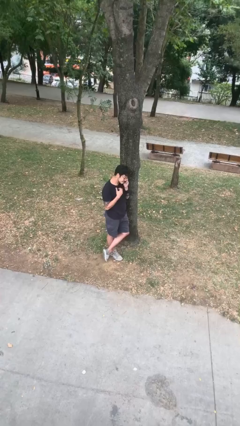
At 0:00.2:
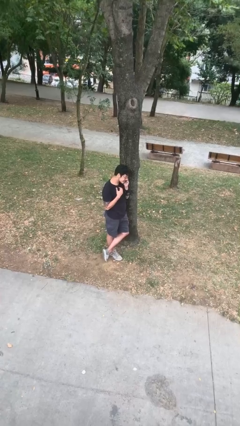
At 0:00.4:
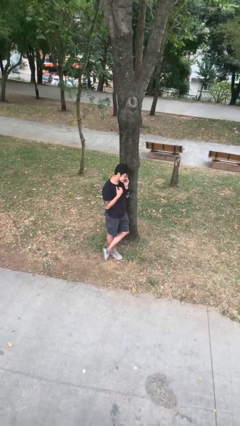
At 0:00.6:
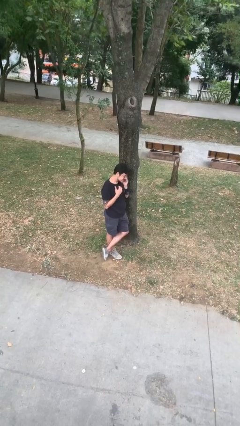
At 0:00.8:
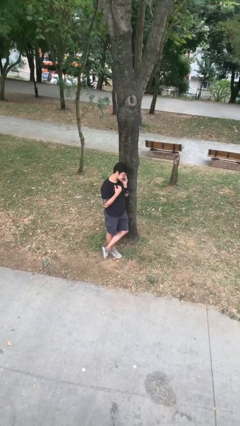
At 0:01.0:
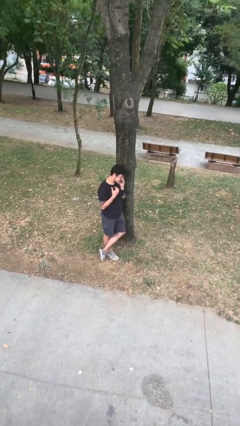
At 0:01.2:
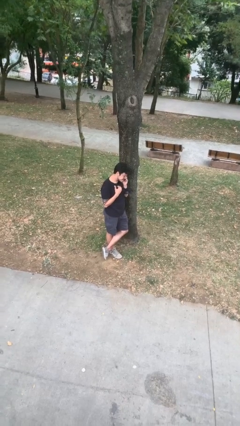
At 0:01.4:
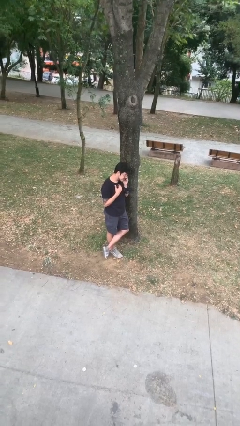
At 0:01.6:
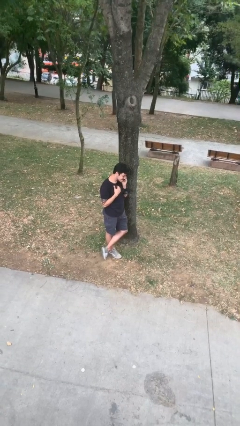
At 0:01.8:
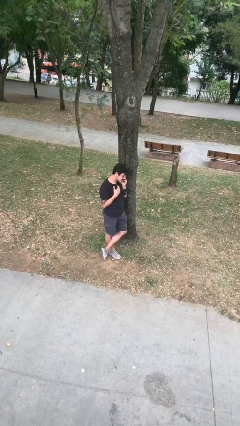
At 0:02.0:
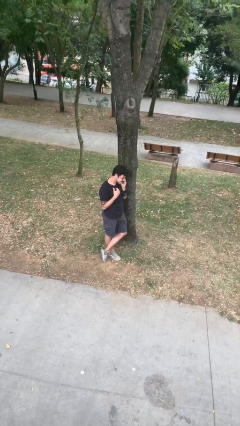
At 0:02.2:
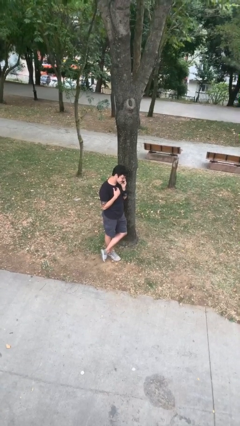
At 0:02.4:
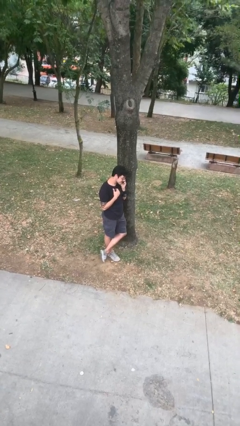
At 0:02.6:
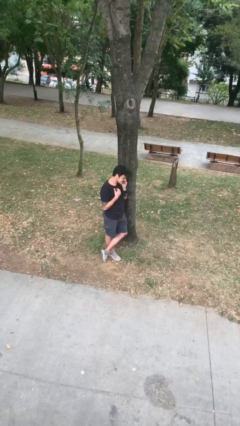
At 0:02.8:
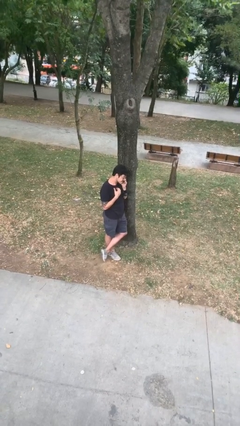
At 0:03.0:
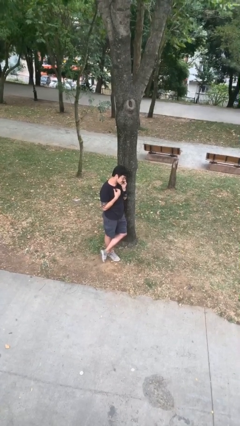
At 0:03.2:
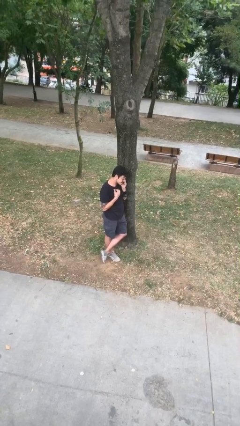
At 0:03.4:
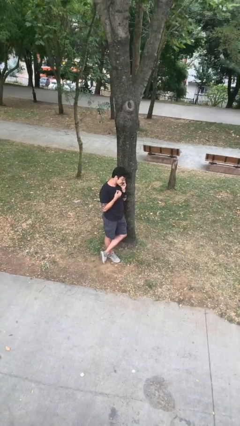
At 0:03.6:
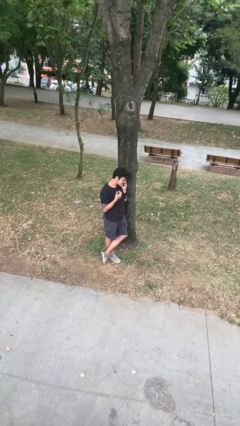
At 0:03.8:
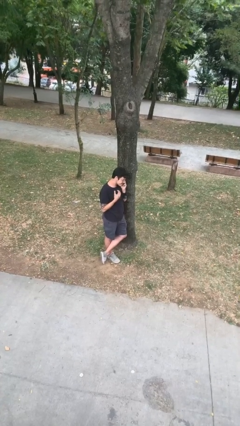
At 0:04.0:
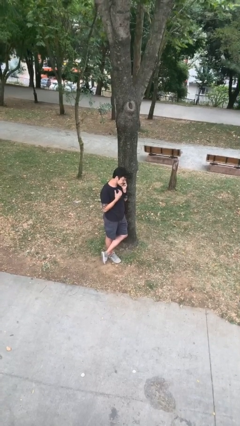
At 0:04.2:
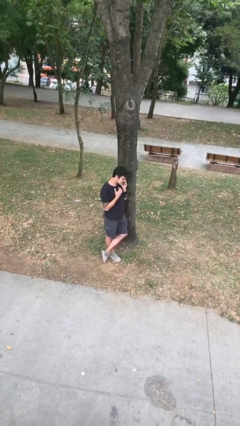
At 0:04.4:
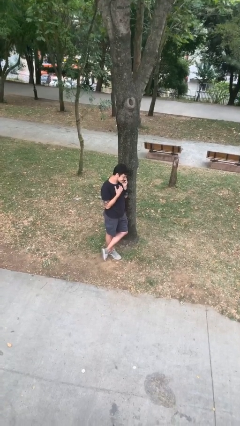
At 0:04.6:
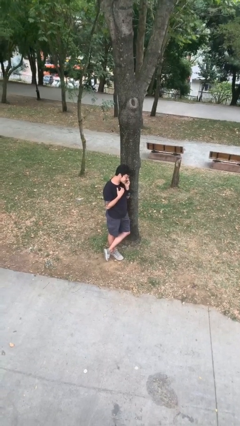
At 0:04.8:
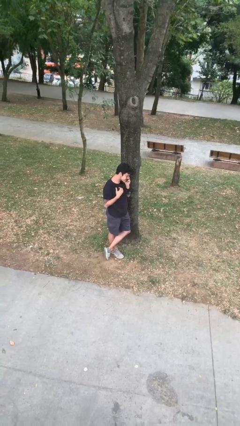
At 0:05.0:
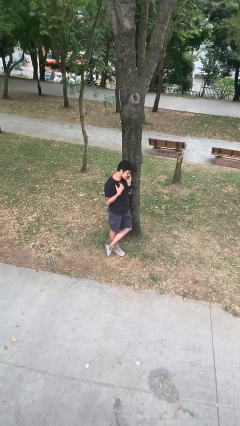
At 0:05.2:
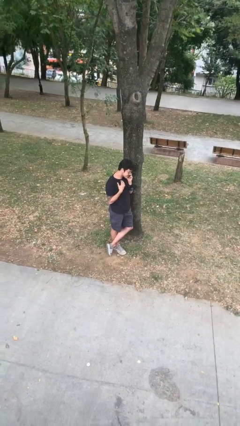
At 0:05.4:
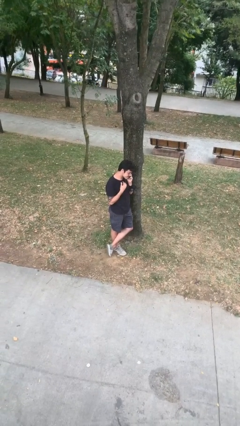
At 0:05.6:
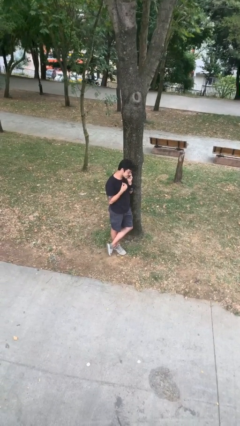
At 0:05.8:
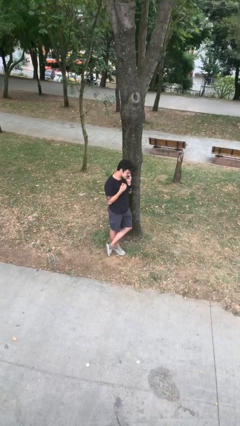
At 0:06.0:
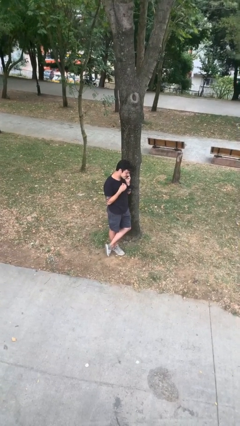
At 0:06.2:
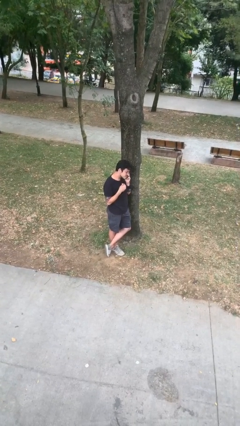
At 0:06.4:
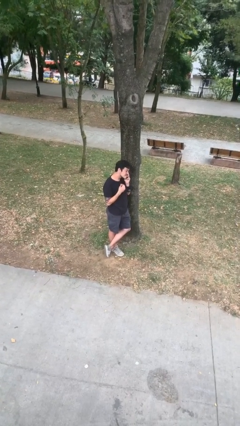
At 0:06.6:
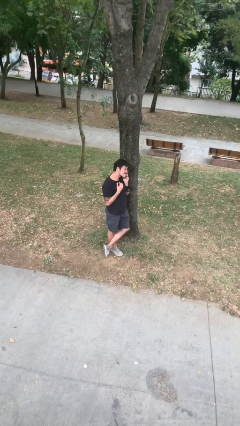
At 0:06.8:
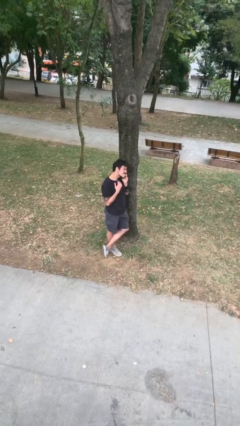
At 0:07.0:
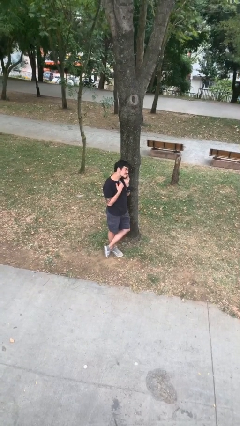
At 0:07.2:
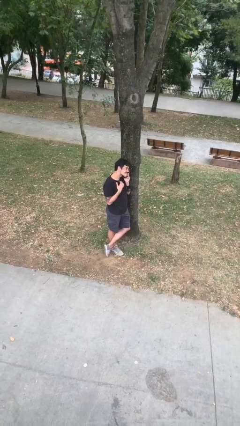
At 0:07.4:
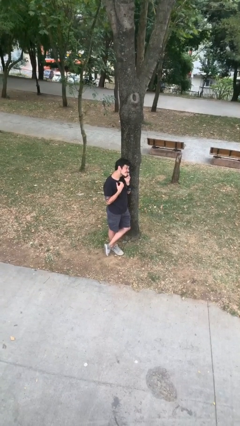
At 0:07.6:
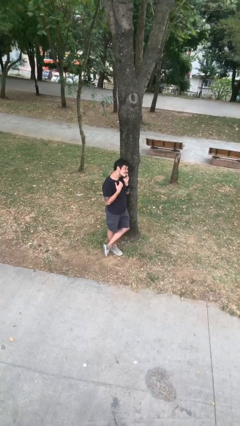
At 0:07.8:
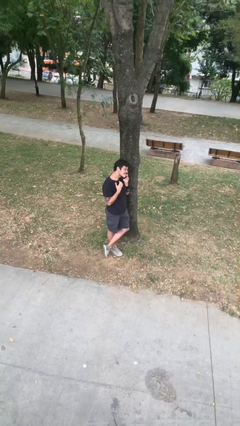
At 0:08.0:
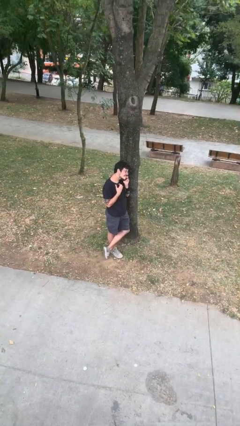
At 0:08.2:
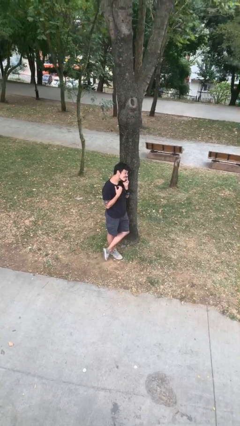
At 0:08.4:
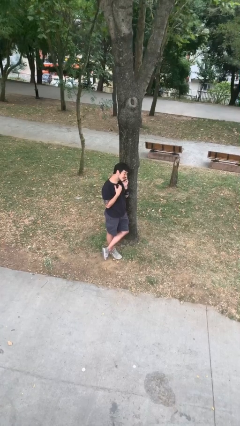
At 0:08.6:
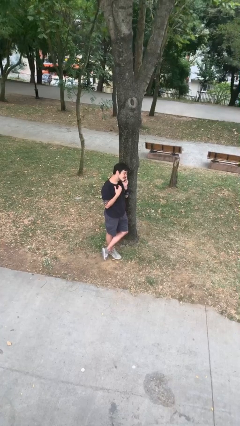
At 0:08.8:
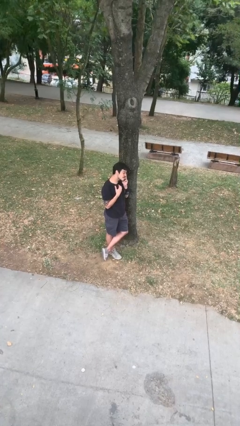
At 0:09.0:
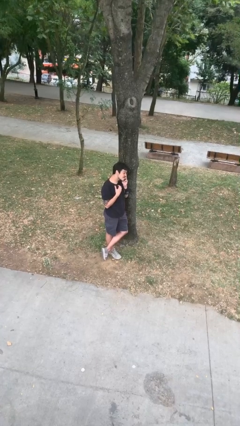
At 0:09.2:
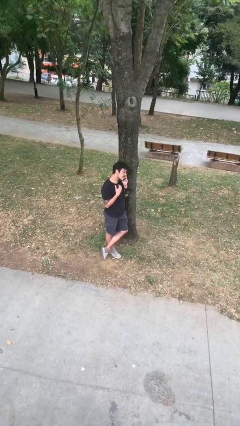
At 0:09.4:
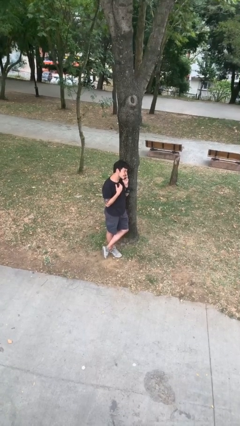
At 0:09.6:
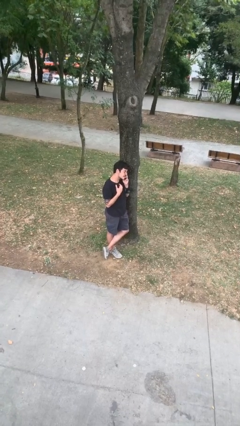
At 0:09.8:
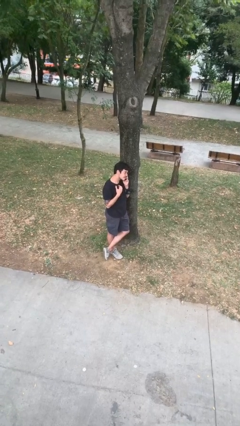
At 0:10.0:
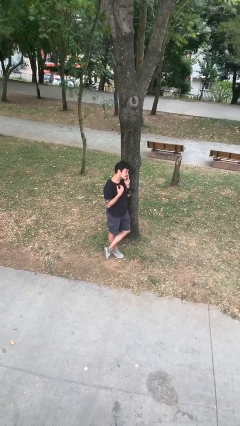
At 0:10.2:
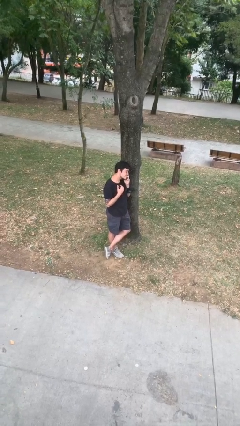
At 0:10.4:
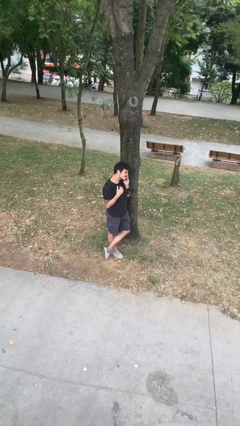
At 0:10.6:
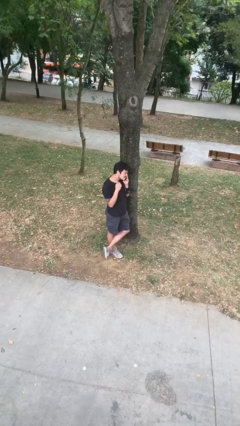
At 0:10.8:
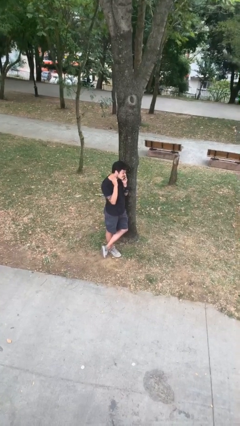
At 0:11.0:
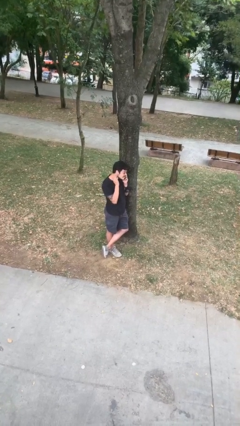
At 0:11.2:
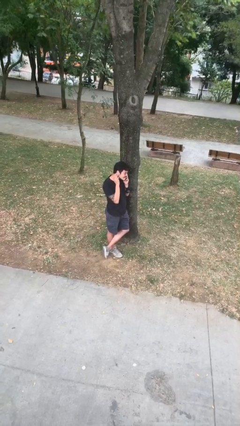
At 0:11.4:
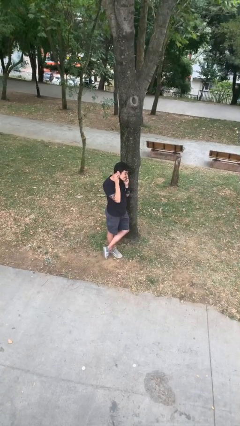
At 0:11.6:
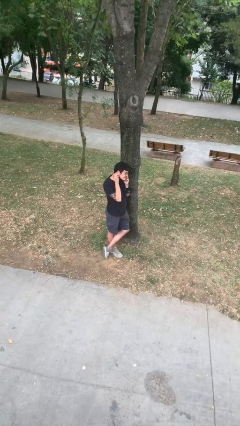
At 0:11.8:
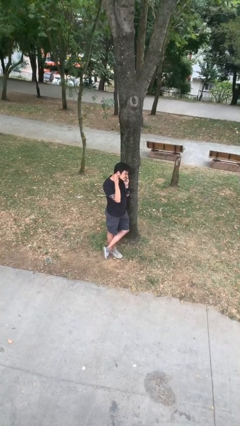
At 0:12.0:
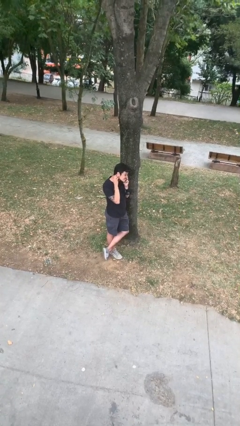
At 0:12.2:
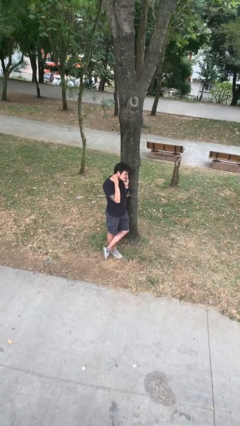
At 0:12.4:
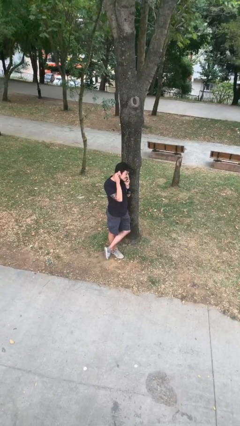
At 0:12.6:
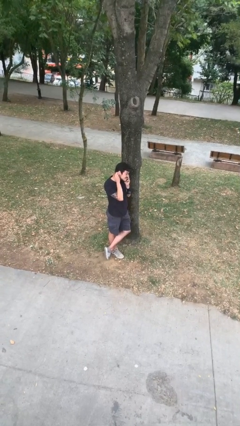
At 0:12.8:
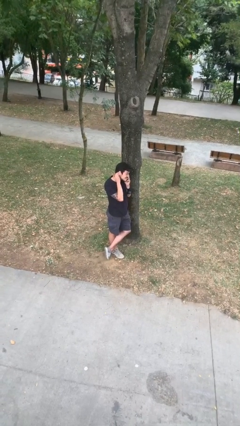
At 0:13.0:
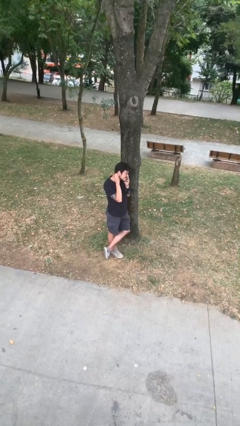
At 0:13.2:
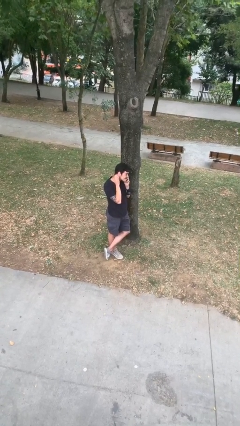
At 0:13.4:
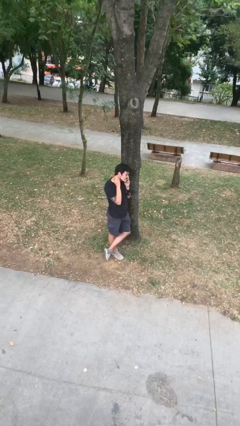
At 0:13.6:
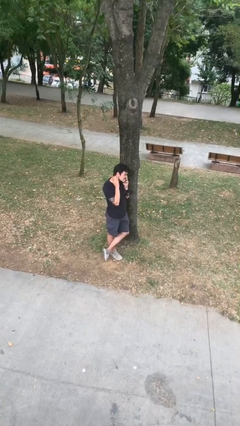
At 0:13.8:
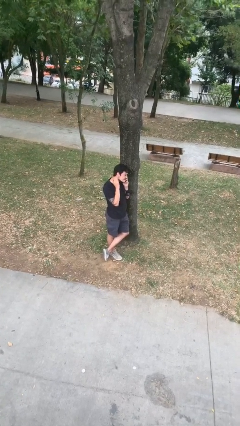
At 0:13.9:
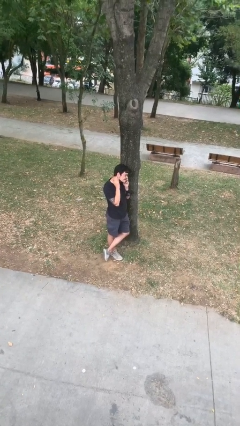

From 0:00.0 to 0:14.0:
person talks on phone

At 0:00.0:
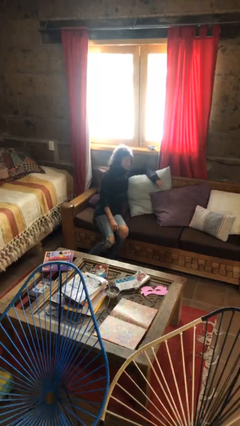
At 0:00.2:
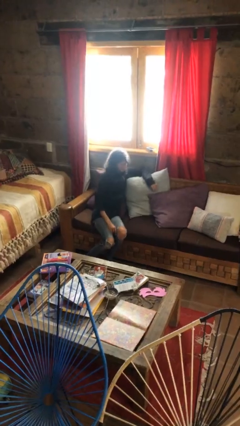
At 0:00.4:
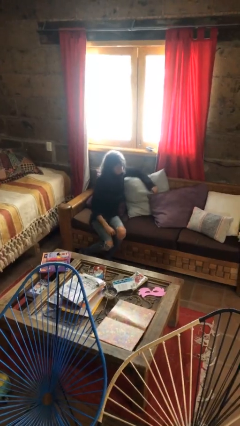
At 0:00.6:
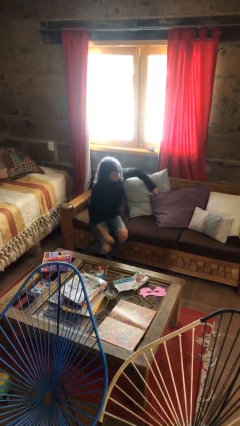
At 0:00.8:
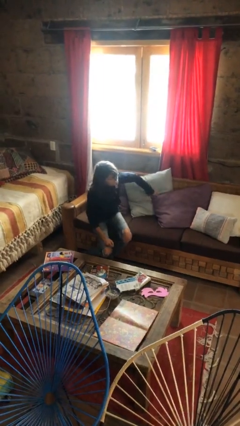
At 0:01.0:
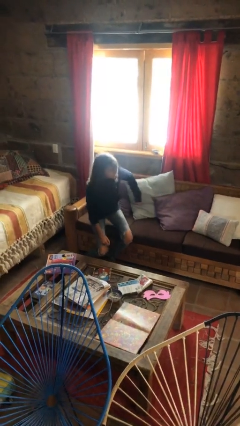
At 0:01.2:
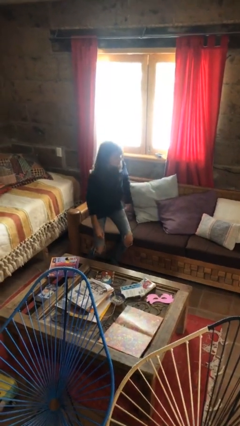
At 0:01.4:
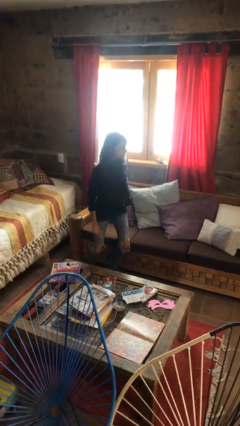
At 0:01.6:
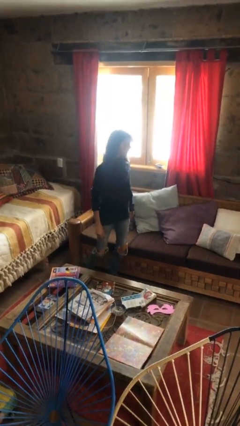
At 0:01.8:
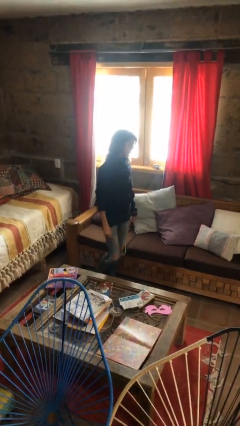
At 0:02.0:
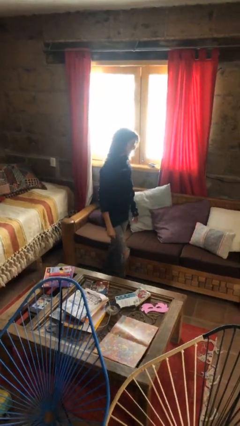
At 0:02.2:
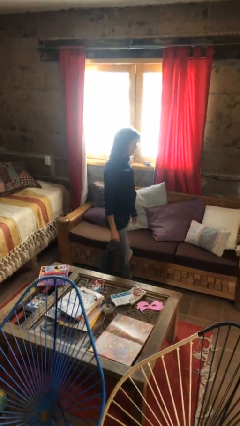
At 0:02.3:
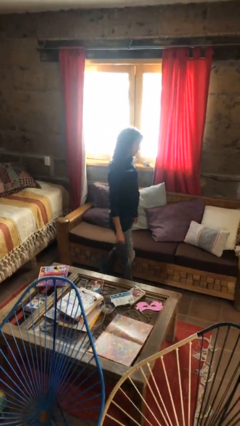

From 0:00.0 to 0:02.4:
person stands up

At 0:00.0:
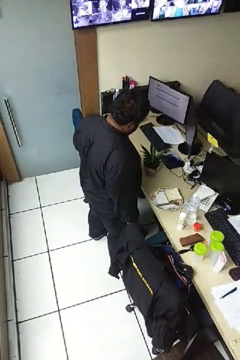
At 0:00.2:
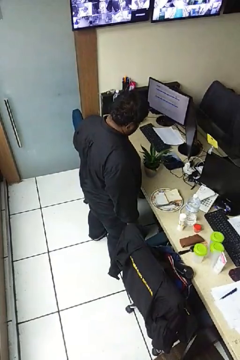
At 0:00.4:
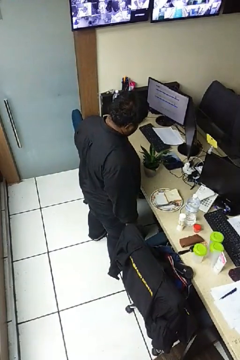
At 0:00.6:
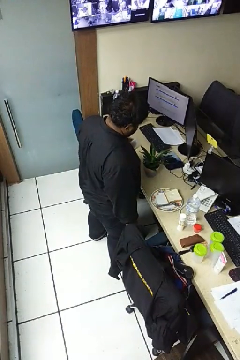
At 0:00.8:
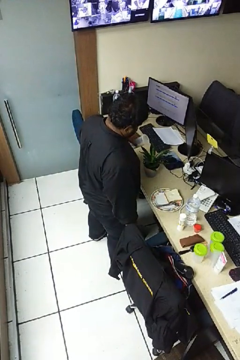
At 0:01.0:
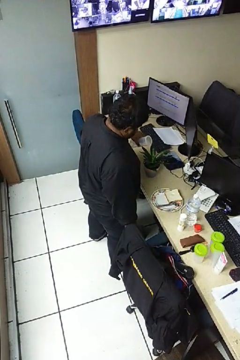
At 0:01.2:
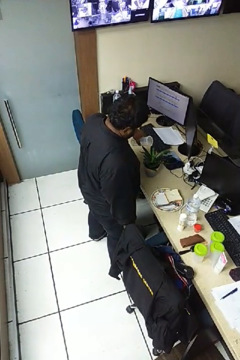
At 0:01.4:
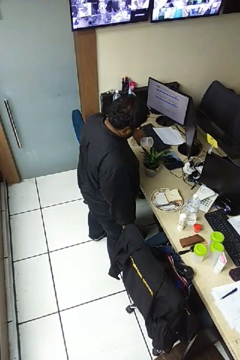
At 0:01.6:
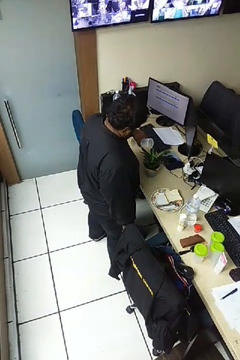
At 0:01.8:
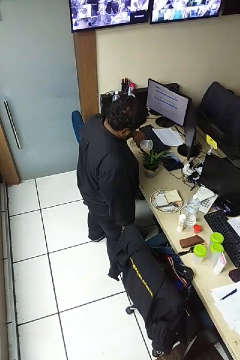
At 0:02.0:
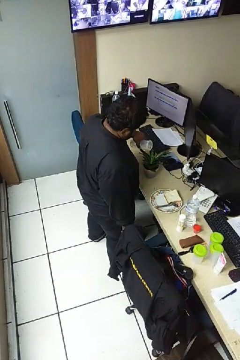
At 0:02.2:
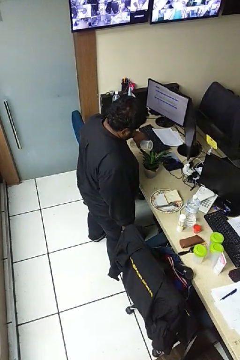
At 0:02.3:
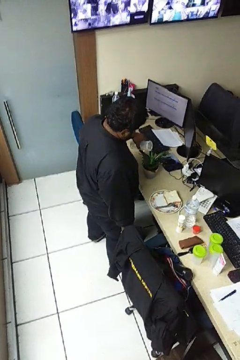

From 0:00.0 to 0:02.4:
person waters houseplant
